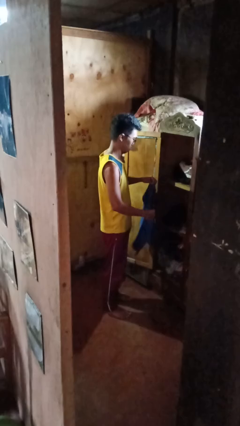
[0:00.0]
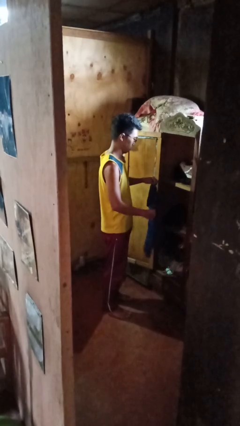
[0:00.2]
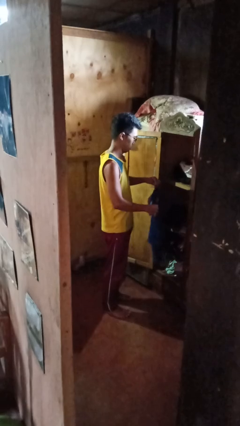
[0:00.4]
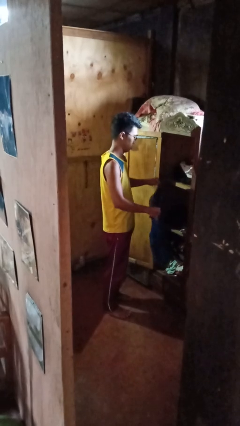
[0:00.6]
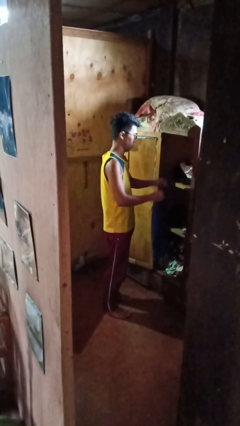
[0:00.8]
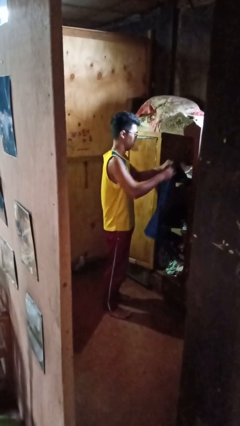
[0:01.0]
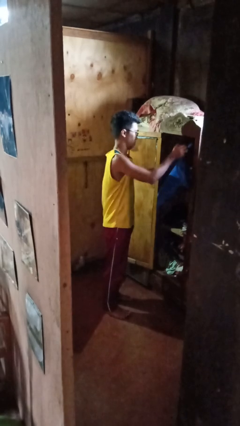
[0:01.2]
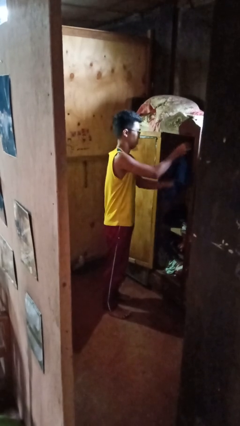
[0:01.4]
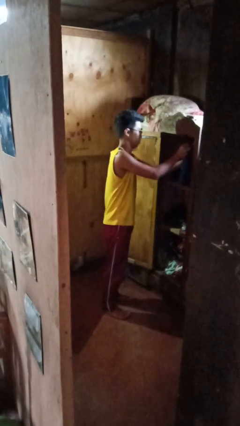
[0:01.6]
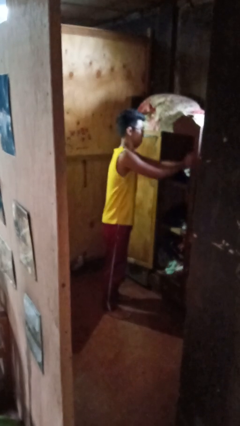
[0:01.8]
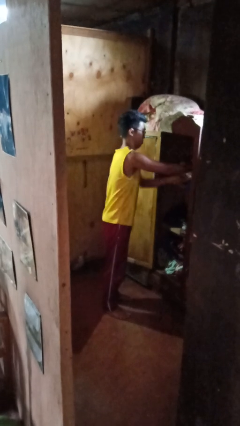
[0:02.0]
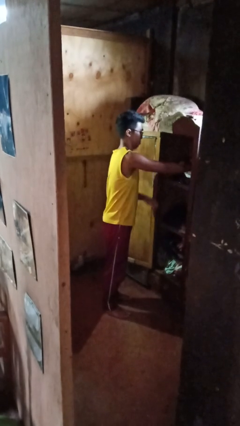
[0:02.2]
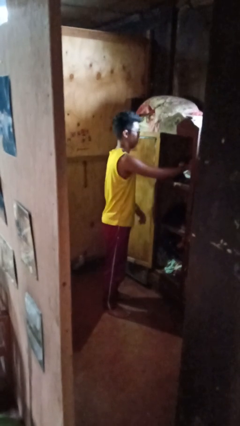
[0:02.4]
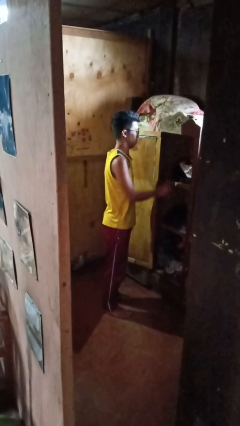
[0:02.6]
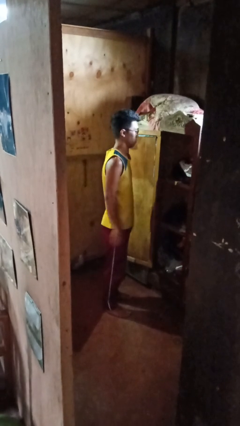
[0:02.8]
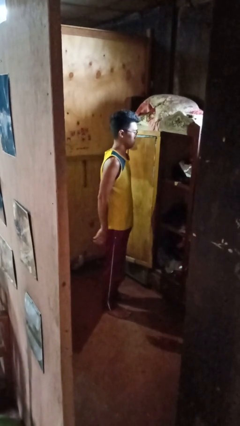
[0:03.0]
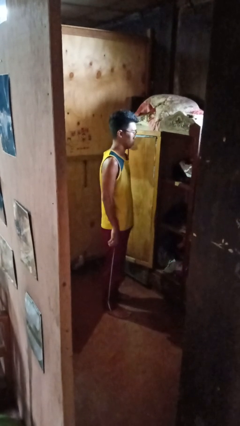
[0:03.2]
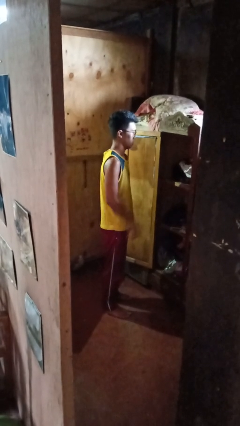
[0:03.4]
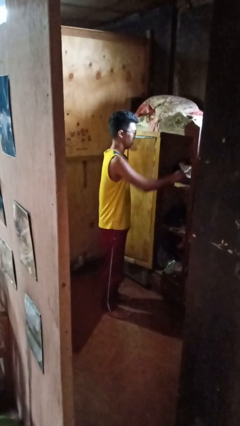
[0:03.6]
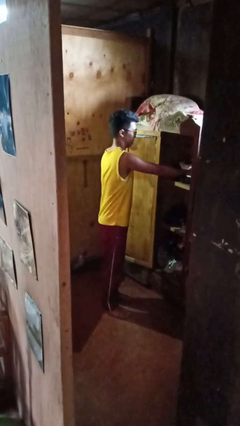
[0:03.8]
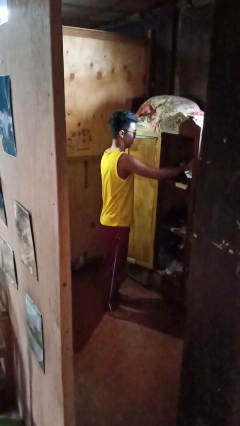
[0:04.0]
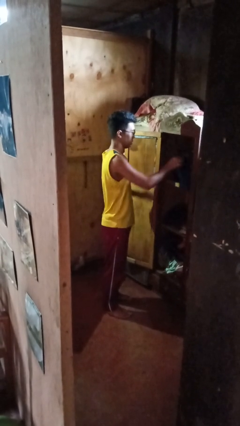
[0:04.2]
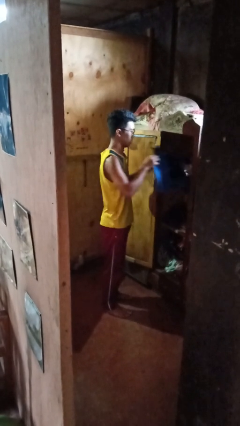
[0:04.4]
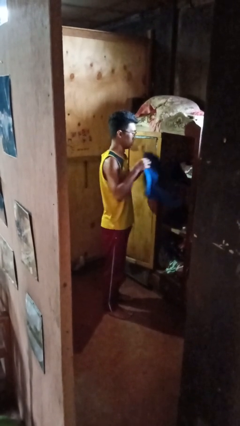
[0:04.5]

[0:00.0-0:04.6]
person puts clothes into closet

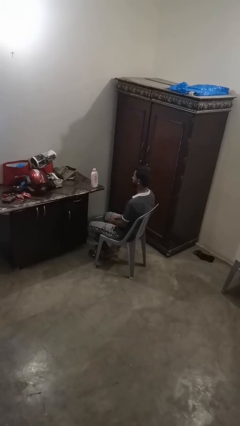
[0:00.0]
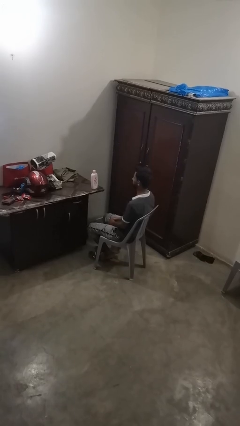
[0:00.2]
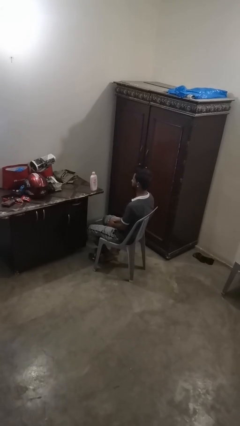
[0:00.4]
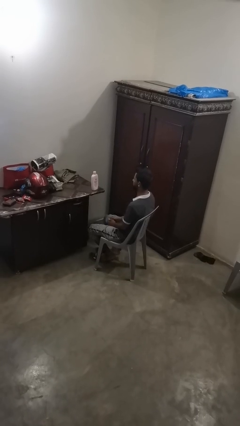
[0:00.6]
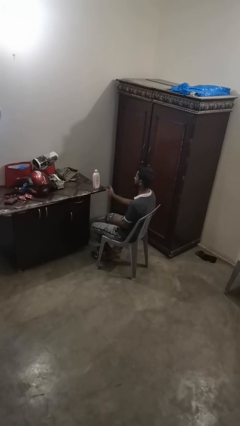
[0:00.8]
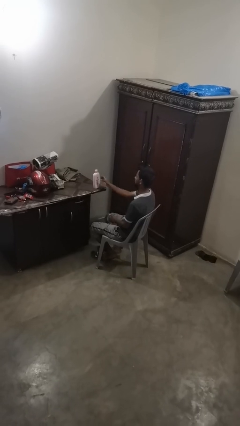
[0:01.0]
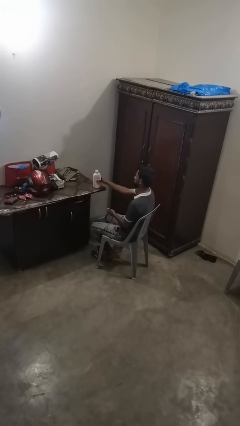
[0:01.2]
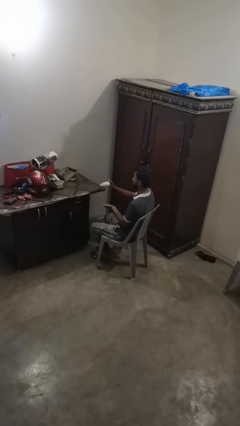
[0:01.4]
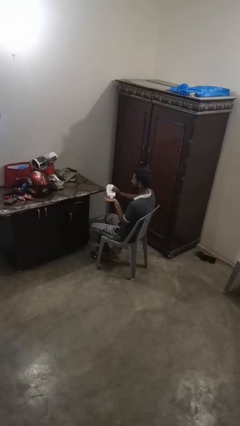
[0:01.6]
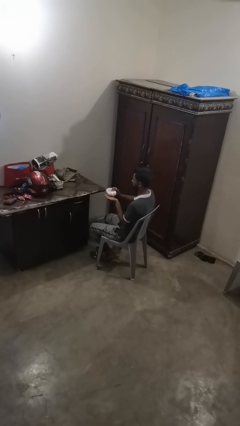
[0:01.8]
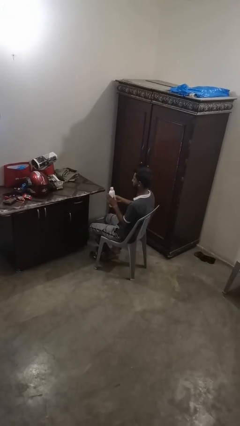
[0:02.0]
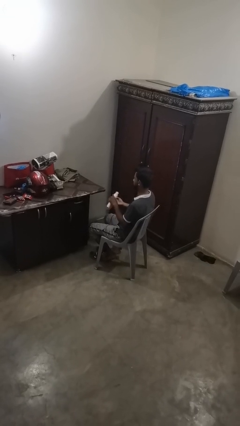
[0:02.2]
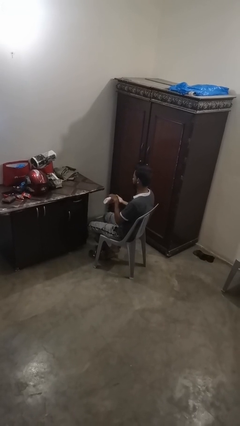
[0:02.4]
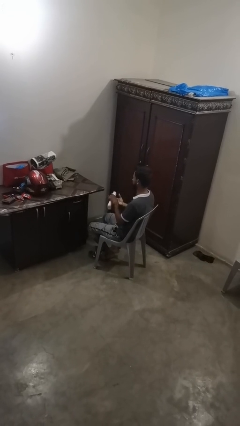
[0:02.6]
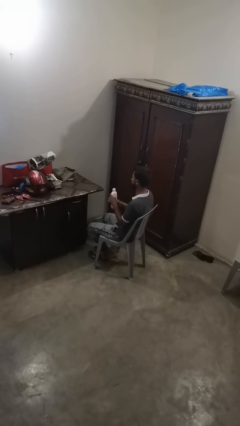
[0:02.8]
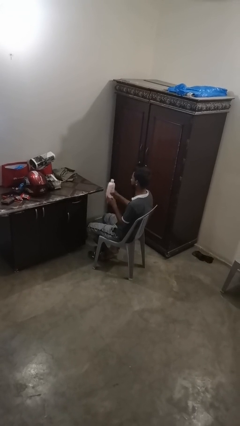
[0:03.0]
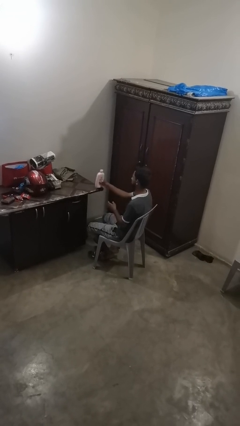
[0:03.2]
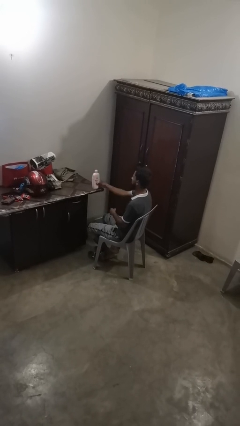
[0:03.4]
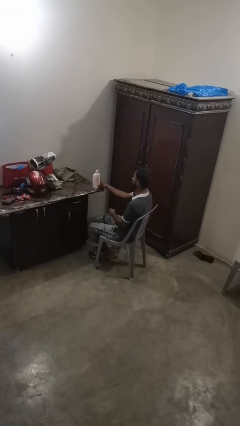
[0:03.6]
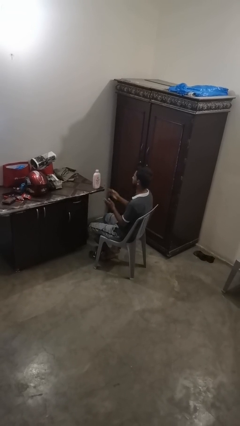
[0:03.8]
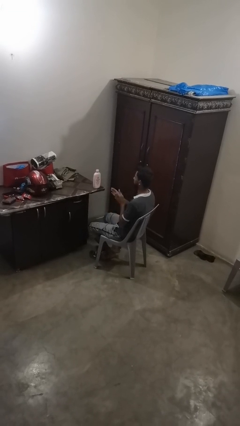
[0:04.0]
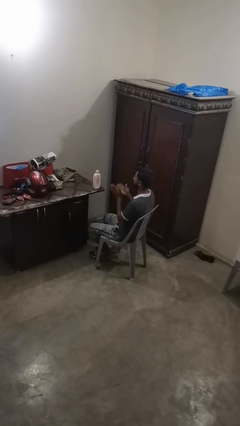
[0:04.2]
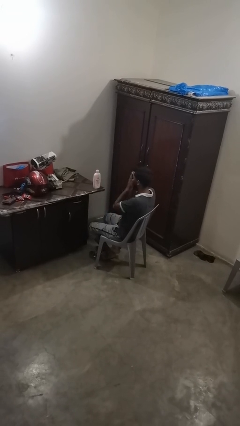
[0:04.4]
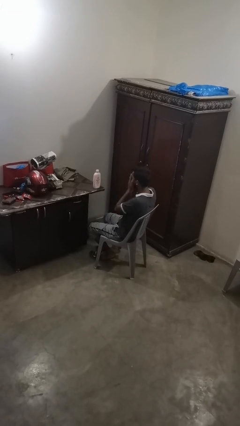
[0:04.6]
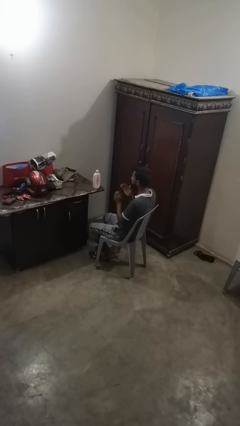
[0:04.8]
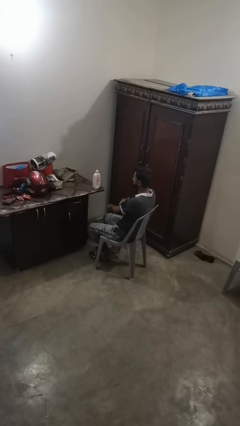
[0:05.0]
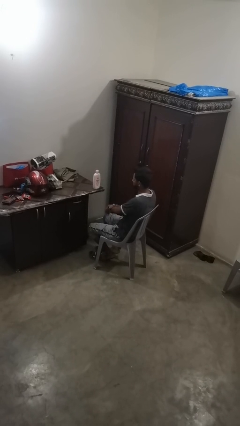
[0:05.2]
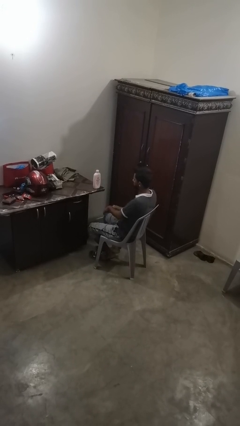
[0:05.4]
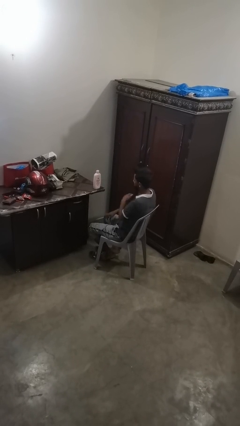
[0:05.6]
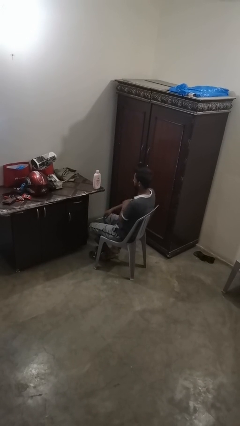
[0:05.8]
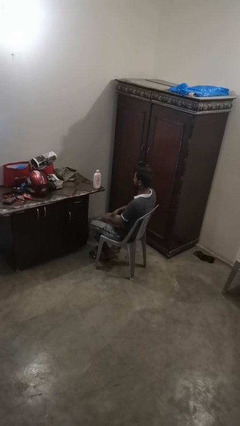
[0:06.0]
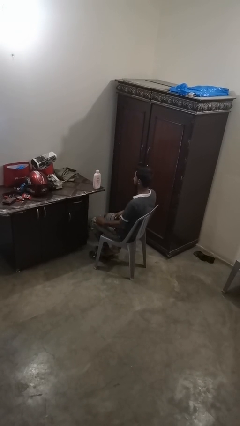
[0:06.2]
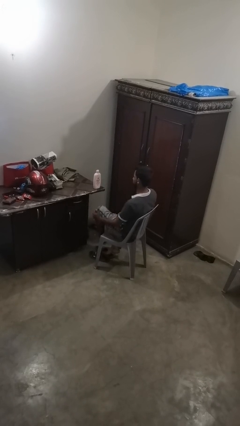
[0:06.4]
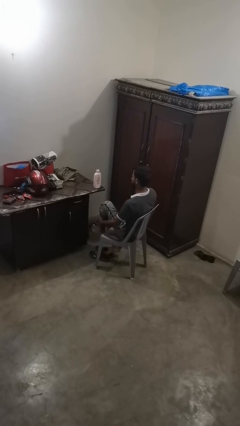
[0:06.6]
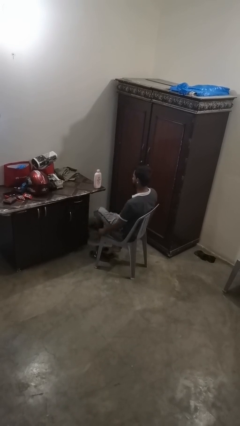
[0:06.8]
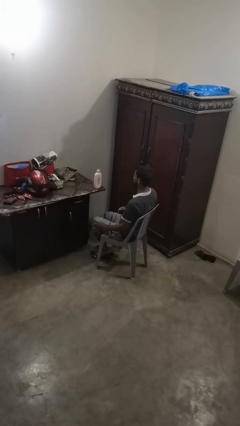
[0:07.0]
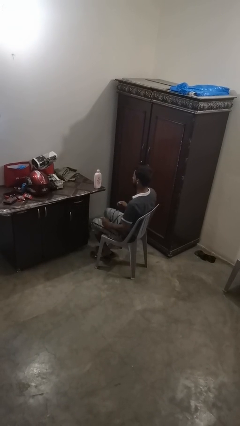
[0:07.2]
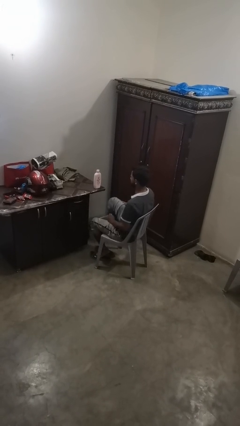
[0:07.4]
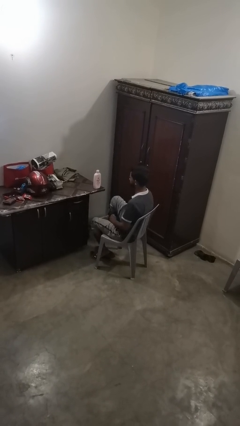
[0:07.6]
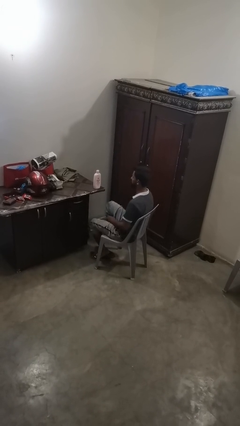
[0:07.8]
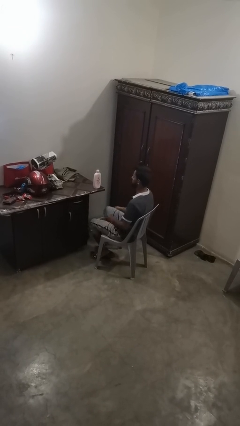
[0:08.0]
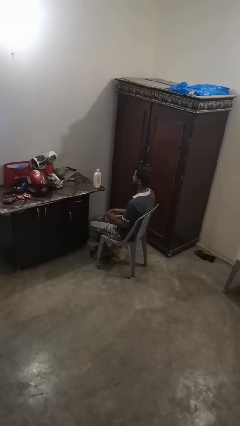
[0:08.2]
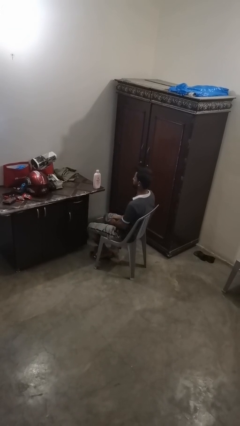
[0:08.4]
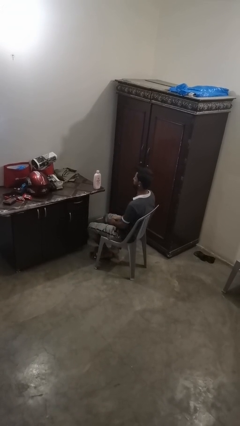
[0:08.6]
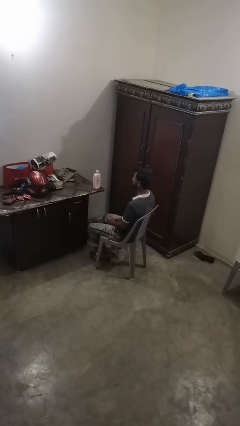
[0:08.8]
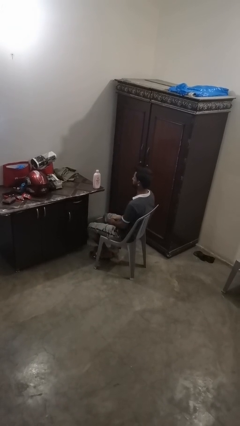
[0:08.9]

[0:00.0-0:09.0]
person applies sunscreen

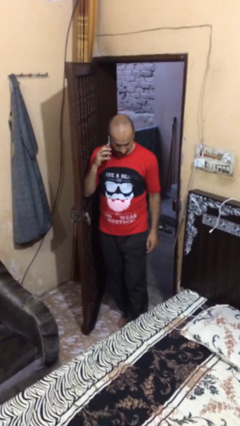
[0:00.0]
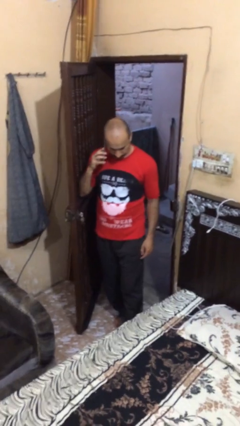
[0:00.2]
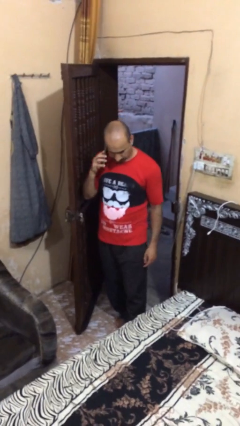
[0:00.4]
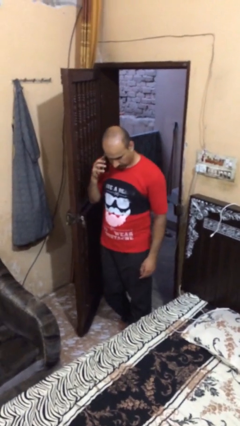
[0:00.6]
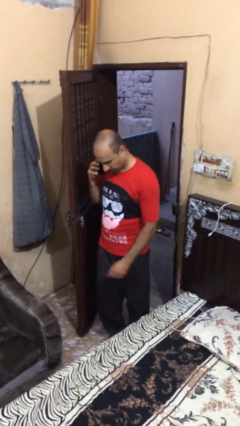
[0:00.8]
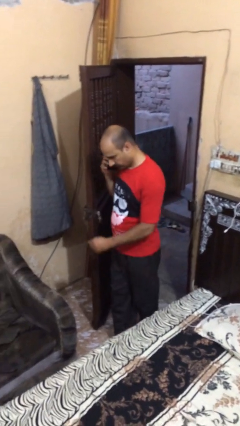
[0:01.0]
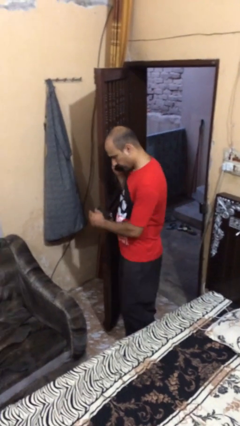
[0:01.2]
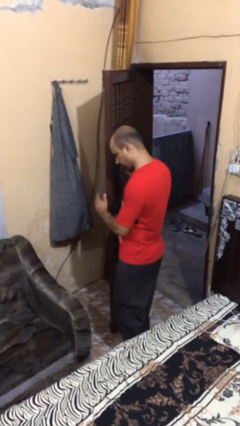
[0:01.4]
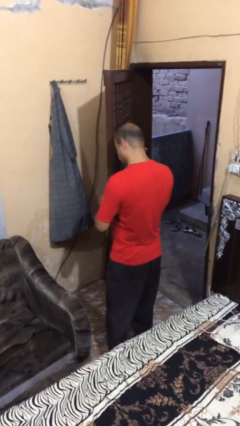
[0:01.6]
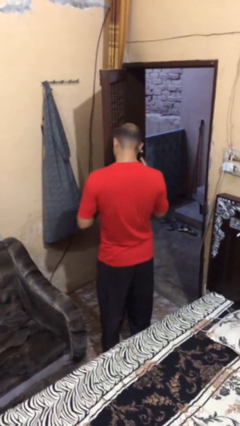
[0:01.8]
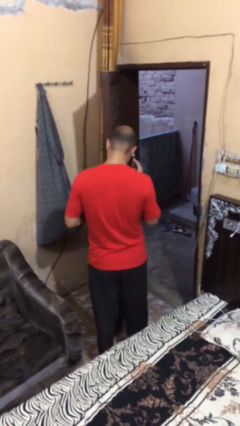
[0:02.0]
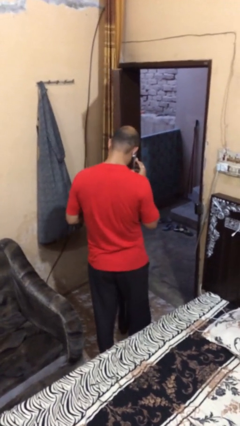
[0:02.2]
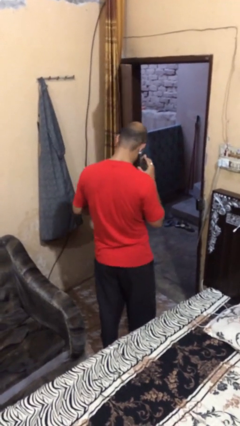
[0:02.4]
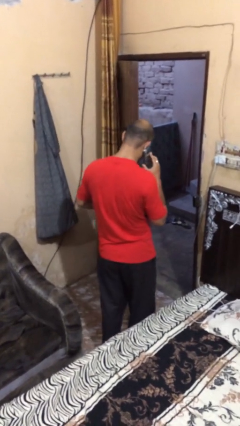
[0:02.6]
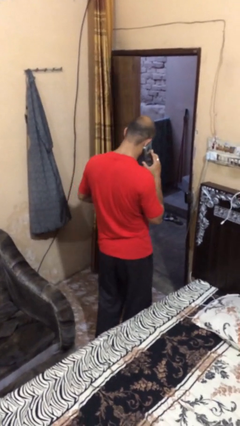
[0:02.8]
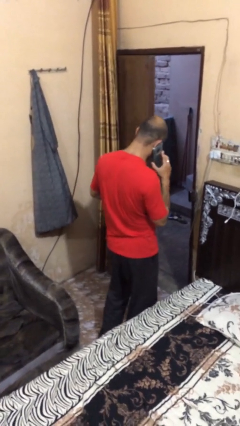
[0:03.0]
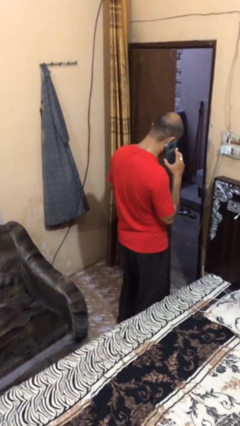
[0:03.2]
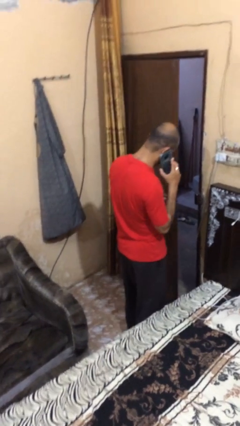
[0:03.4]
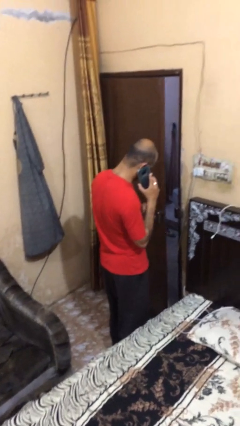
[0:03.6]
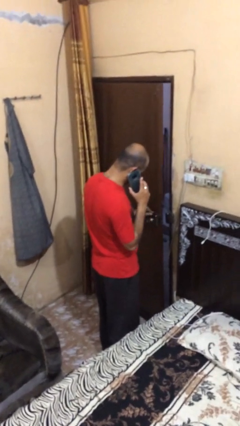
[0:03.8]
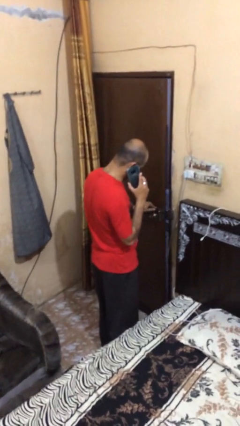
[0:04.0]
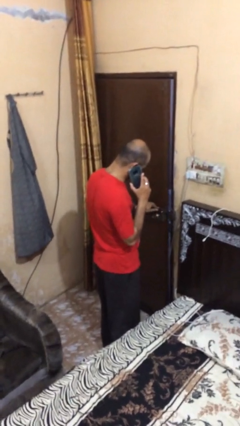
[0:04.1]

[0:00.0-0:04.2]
person closes facility door

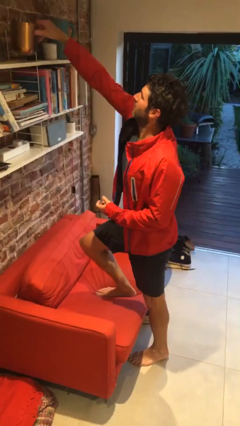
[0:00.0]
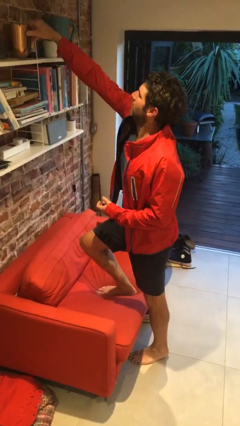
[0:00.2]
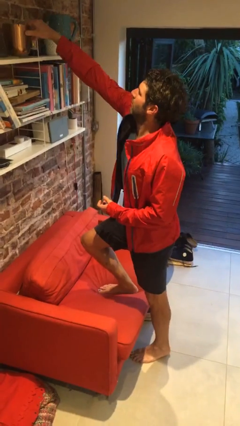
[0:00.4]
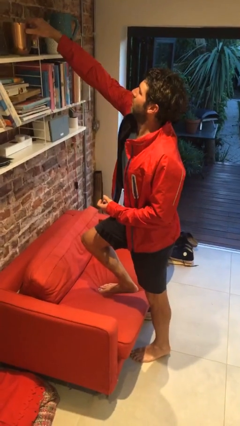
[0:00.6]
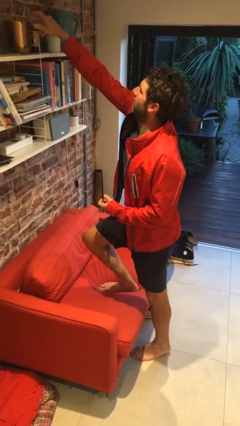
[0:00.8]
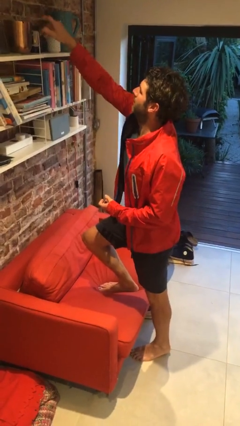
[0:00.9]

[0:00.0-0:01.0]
person puts down object on shelf
